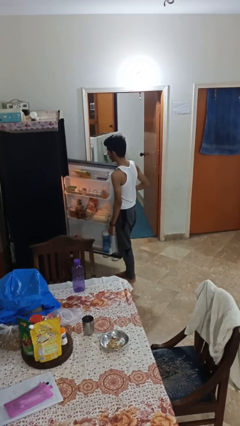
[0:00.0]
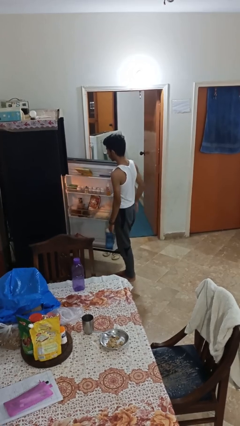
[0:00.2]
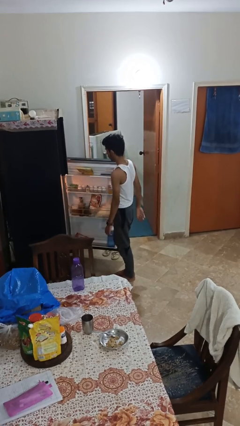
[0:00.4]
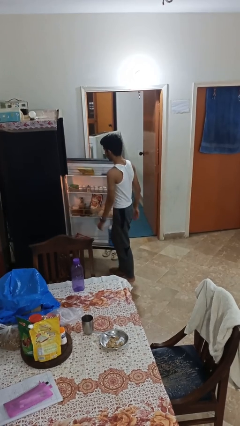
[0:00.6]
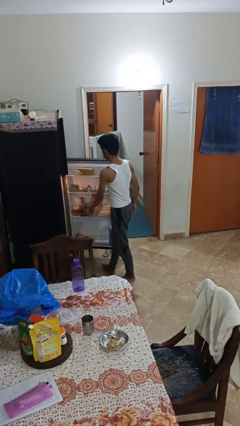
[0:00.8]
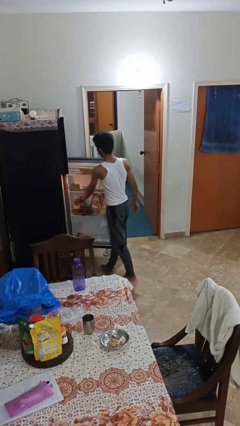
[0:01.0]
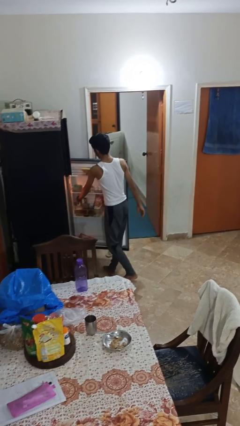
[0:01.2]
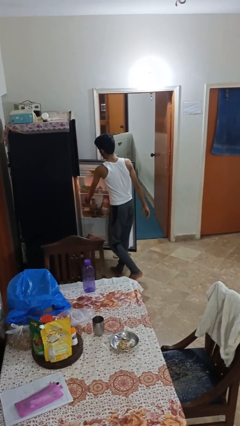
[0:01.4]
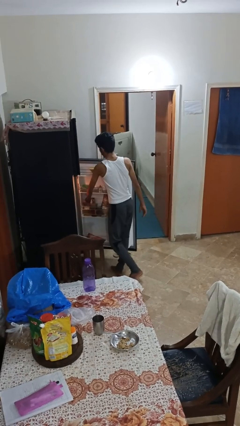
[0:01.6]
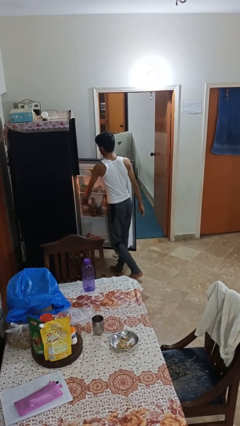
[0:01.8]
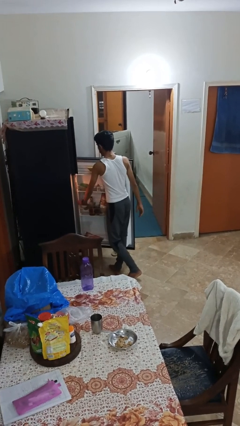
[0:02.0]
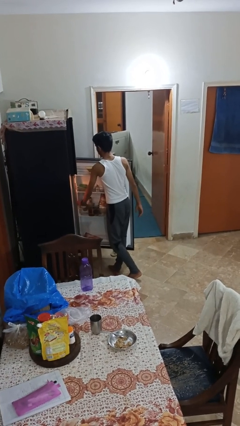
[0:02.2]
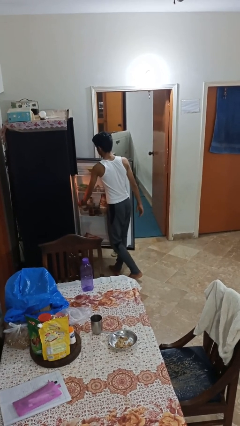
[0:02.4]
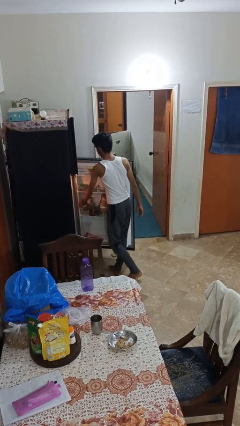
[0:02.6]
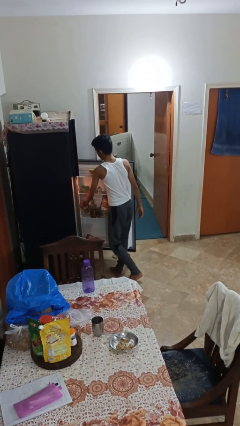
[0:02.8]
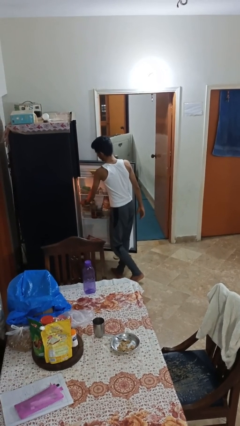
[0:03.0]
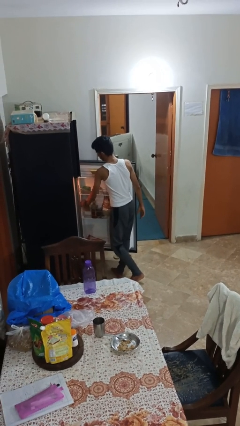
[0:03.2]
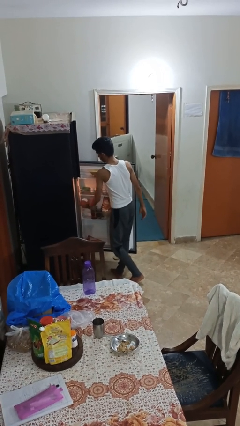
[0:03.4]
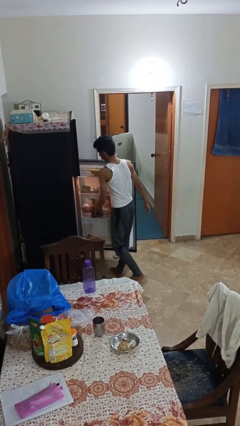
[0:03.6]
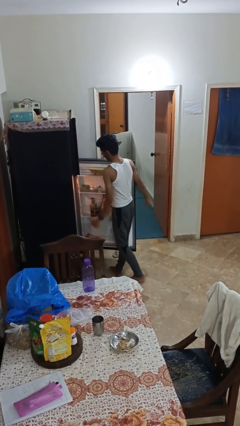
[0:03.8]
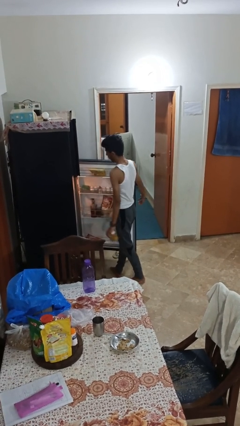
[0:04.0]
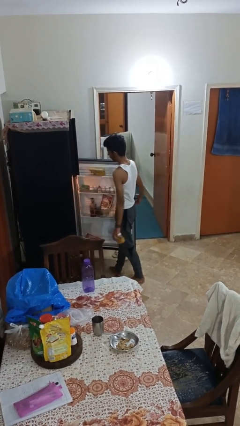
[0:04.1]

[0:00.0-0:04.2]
person takes object from refrigerator

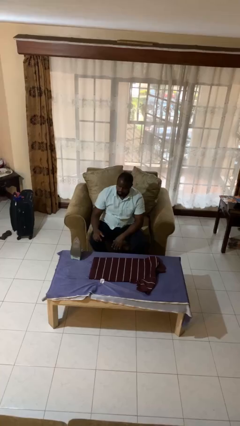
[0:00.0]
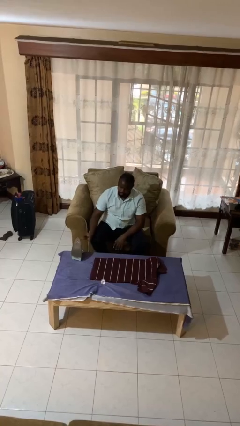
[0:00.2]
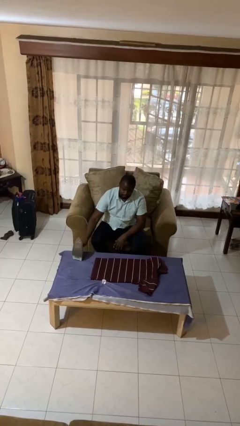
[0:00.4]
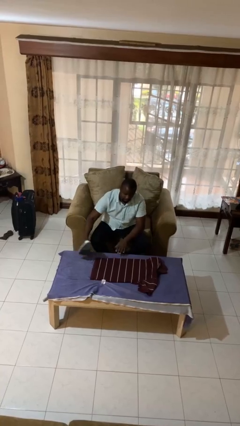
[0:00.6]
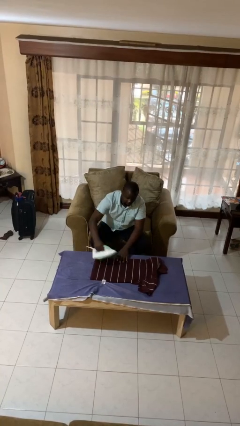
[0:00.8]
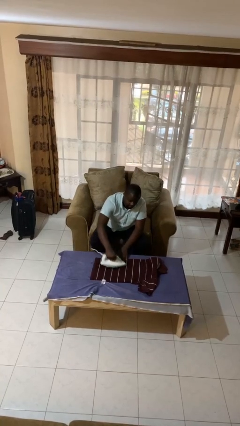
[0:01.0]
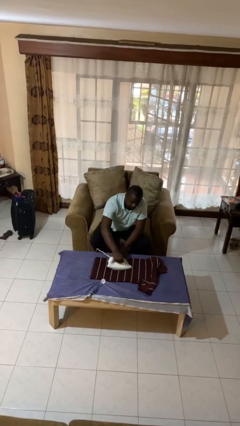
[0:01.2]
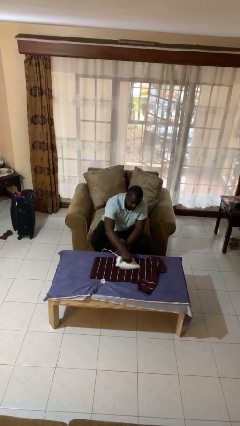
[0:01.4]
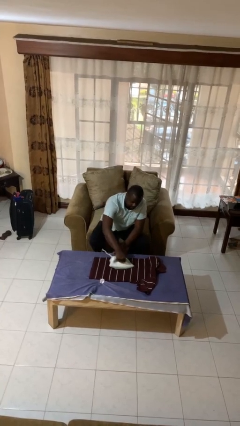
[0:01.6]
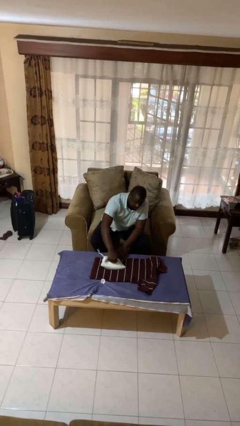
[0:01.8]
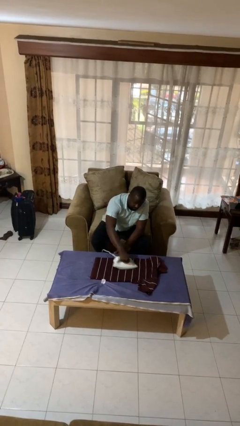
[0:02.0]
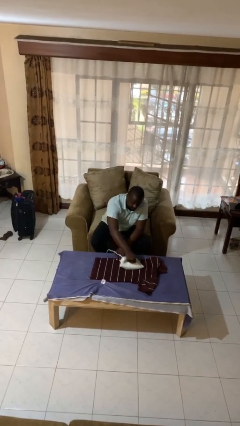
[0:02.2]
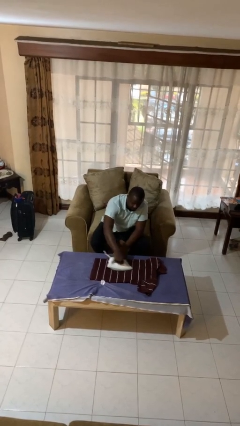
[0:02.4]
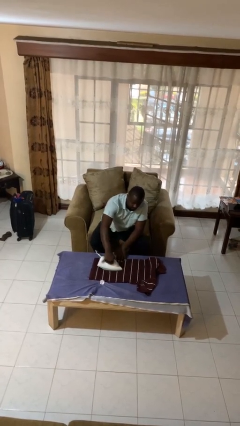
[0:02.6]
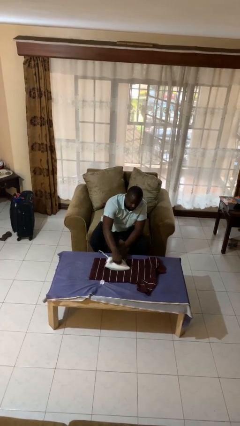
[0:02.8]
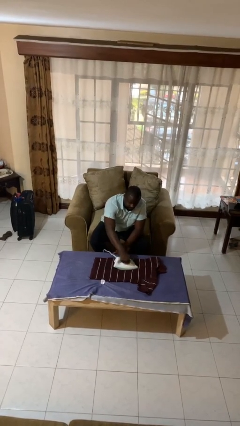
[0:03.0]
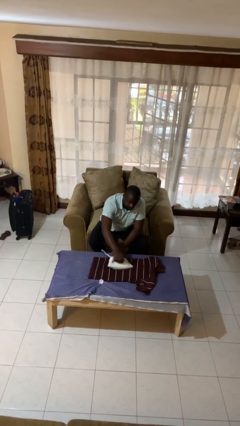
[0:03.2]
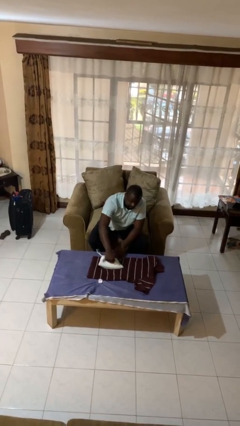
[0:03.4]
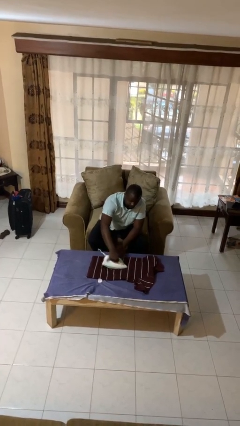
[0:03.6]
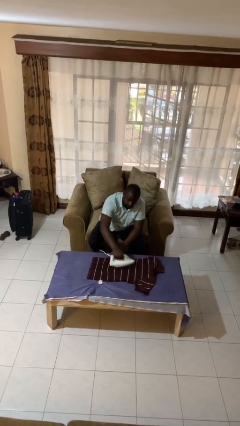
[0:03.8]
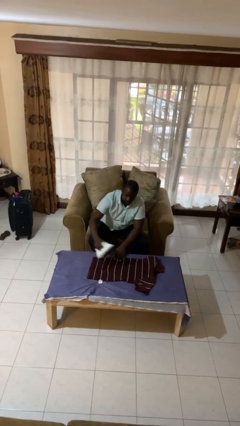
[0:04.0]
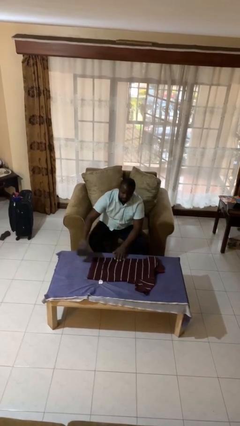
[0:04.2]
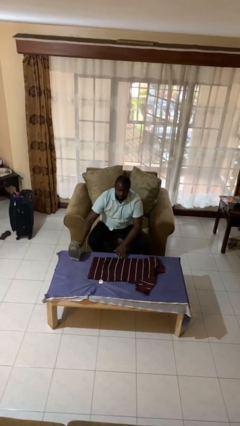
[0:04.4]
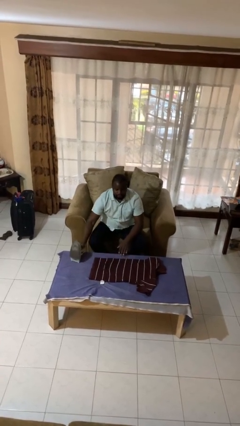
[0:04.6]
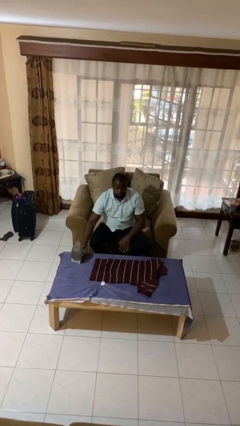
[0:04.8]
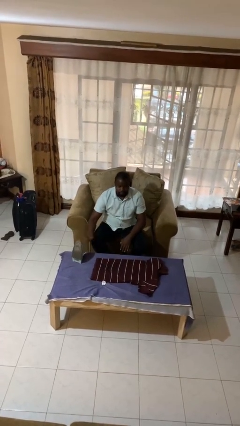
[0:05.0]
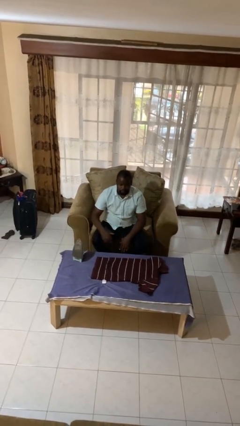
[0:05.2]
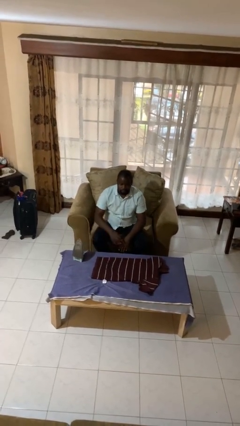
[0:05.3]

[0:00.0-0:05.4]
person irons clothes

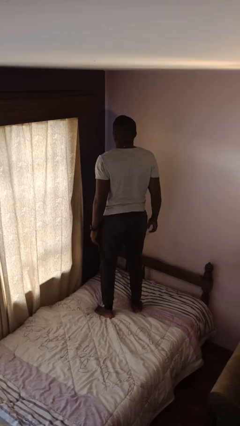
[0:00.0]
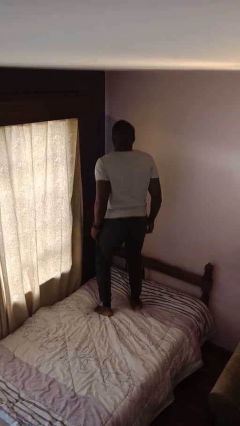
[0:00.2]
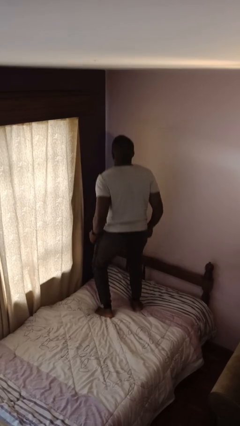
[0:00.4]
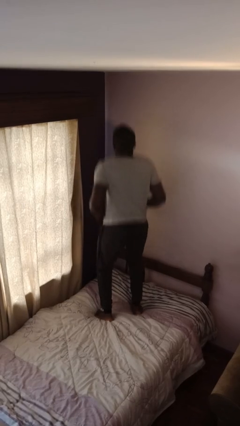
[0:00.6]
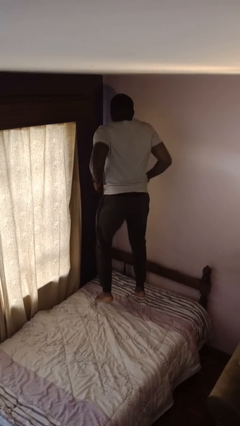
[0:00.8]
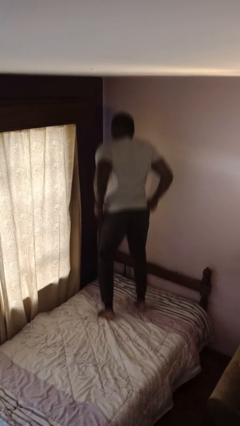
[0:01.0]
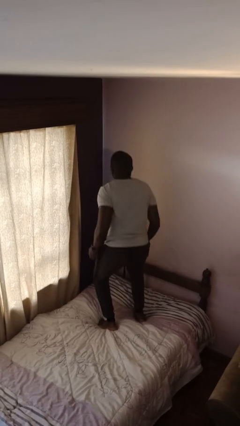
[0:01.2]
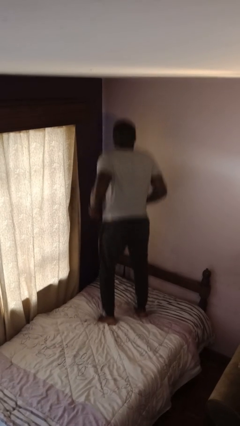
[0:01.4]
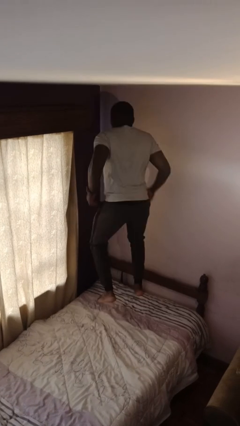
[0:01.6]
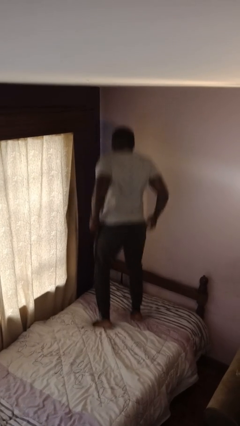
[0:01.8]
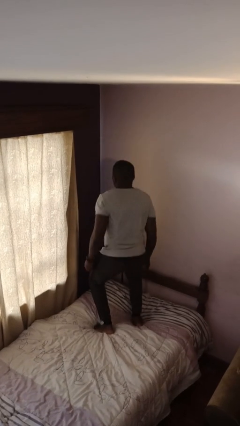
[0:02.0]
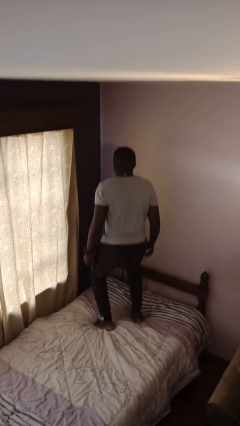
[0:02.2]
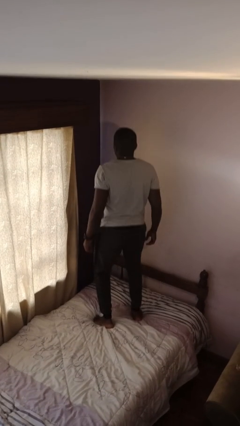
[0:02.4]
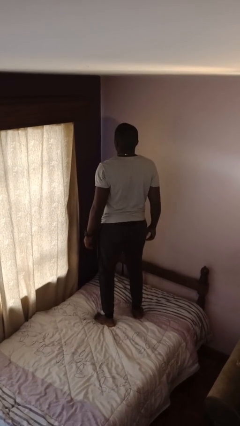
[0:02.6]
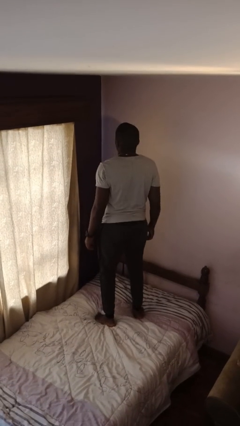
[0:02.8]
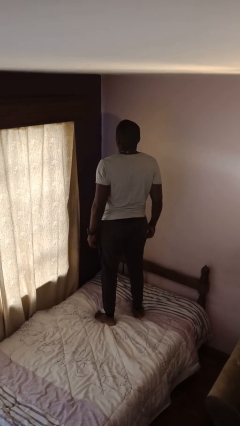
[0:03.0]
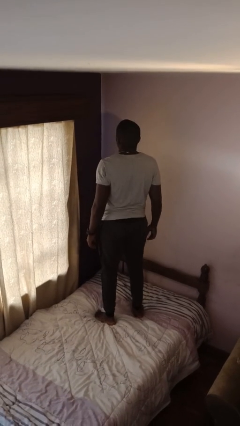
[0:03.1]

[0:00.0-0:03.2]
person jumps on bed

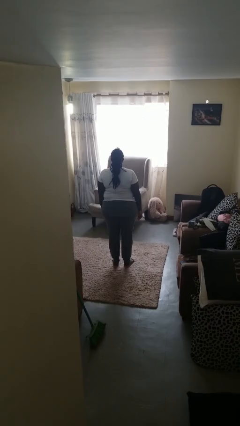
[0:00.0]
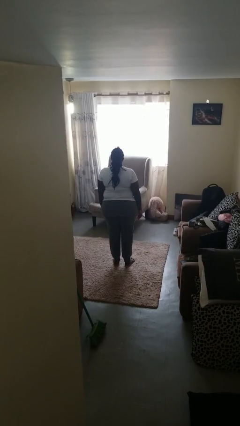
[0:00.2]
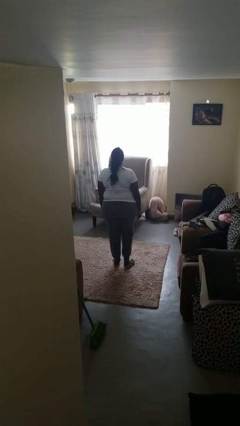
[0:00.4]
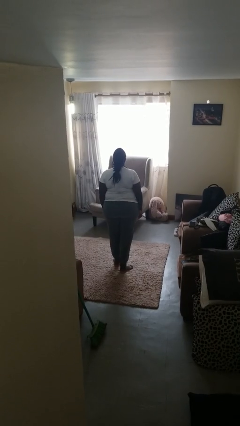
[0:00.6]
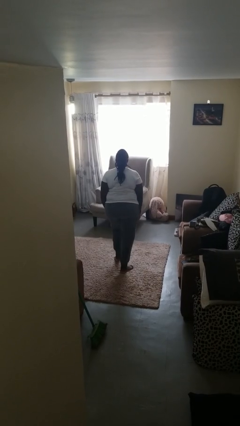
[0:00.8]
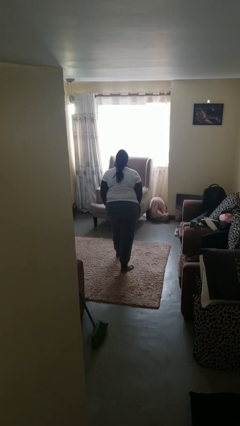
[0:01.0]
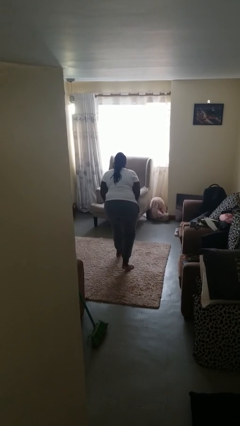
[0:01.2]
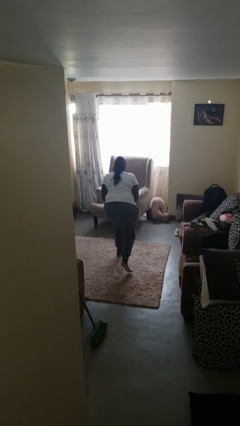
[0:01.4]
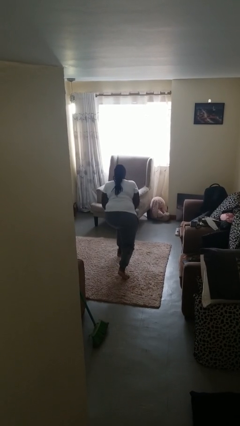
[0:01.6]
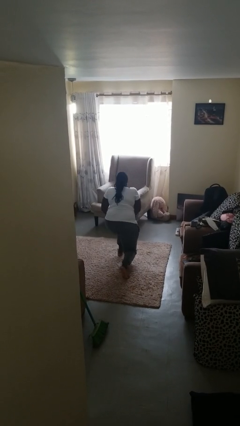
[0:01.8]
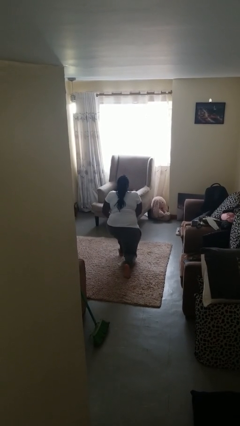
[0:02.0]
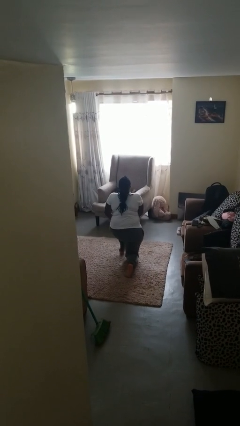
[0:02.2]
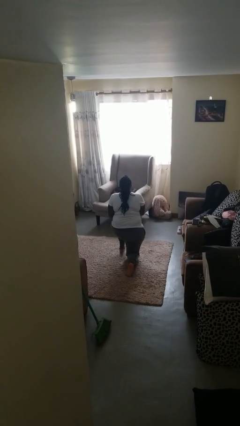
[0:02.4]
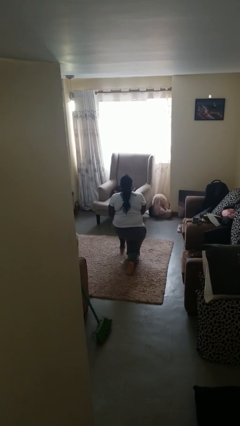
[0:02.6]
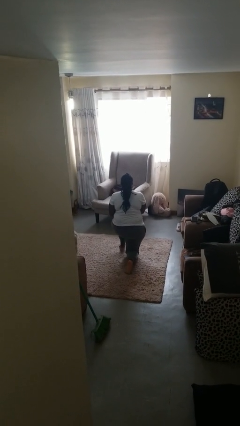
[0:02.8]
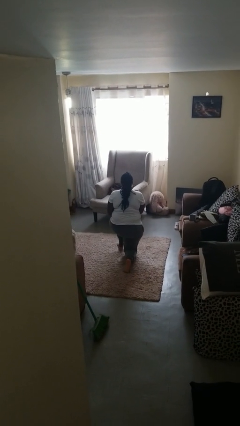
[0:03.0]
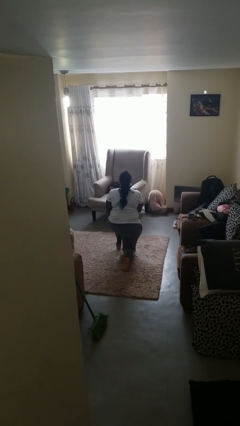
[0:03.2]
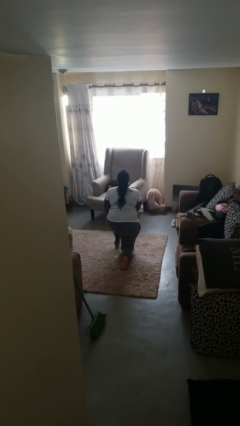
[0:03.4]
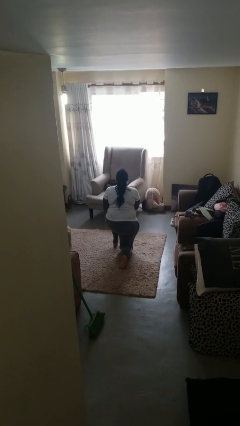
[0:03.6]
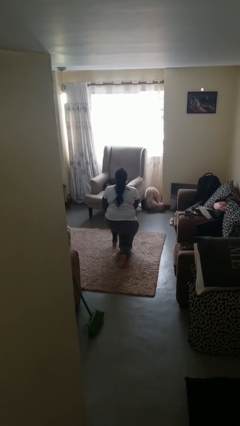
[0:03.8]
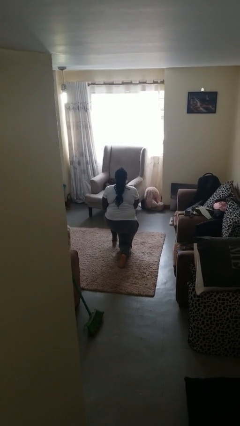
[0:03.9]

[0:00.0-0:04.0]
person kneels

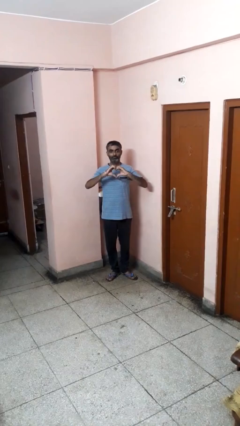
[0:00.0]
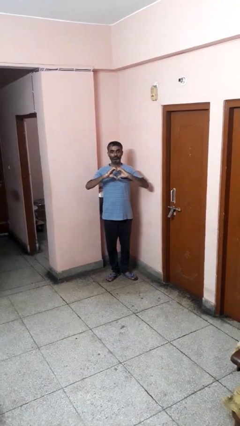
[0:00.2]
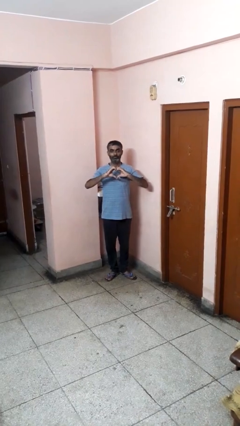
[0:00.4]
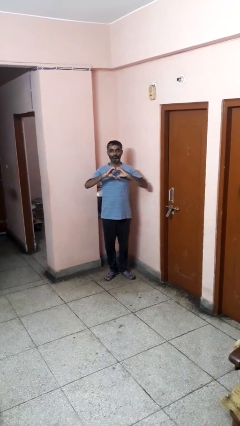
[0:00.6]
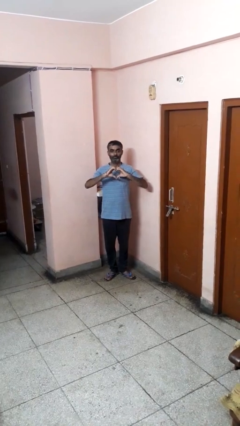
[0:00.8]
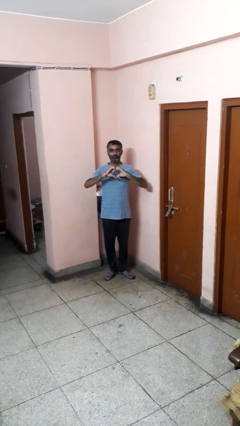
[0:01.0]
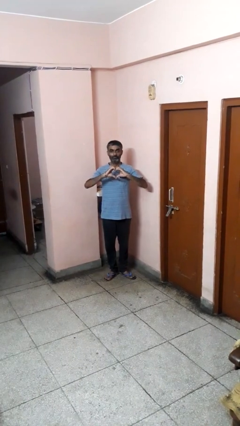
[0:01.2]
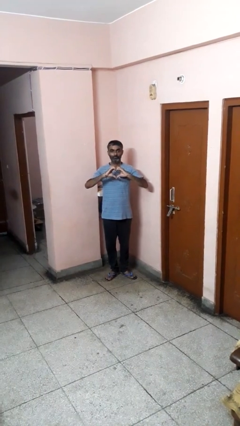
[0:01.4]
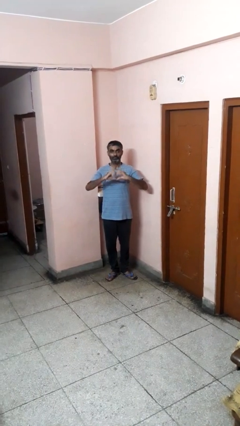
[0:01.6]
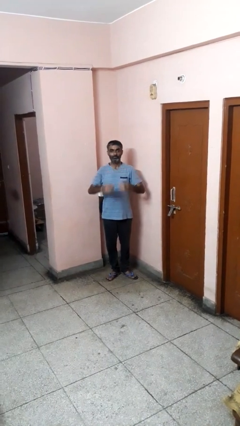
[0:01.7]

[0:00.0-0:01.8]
person gestures heart
